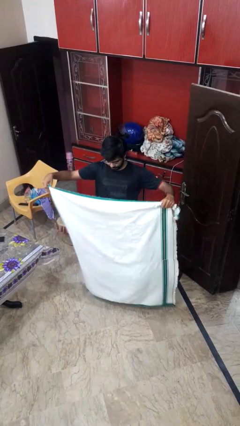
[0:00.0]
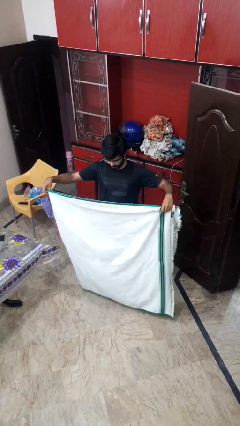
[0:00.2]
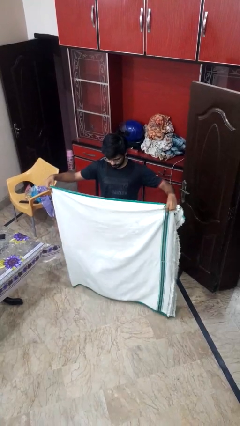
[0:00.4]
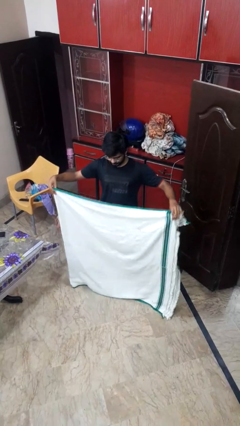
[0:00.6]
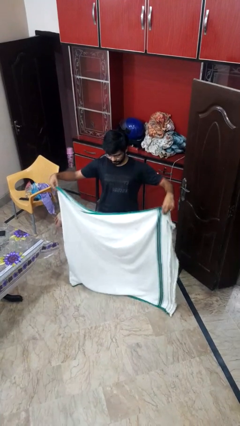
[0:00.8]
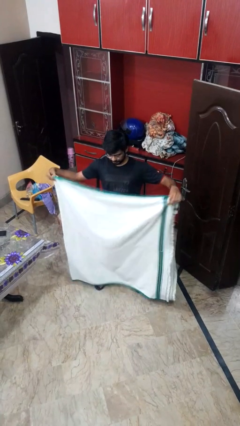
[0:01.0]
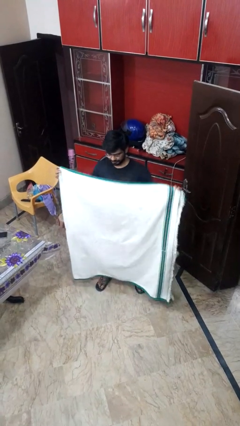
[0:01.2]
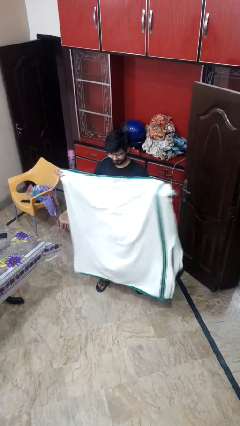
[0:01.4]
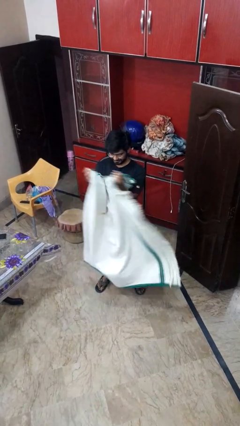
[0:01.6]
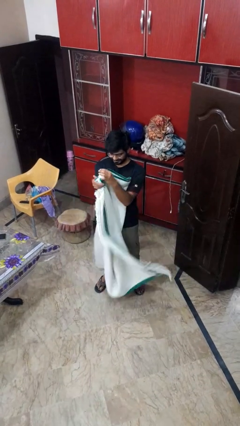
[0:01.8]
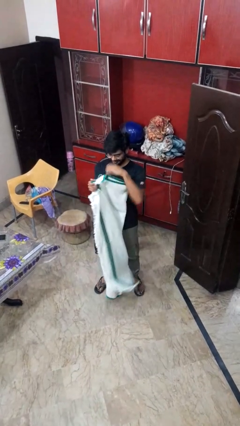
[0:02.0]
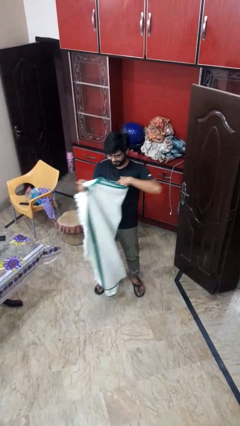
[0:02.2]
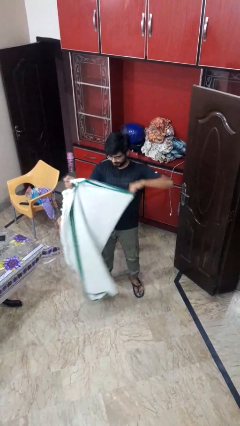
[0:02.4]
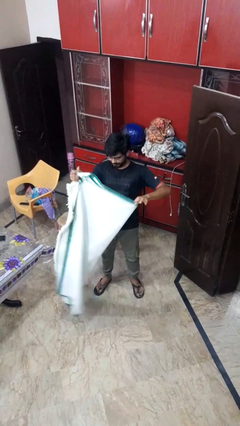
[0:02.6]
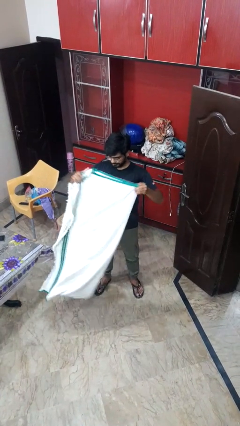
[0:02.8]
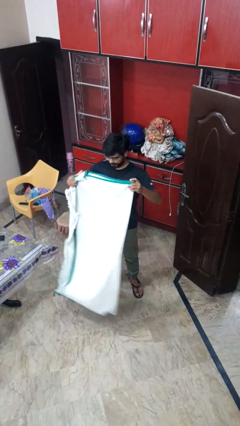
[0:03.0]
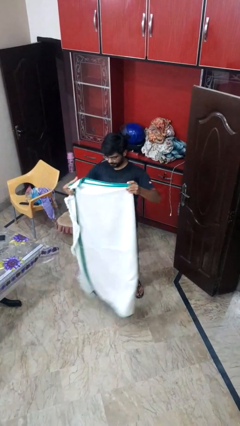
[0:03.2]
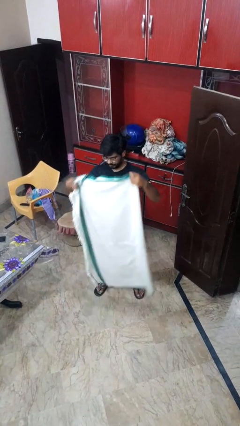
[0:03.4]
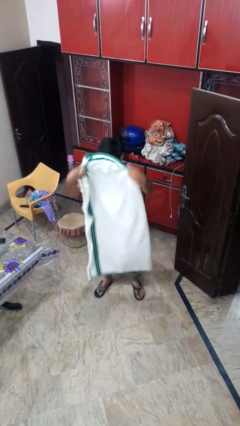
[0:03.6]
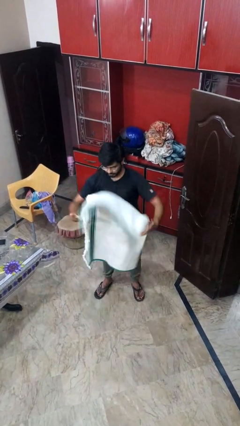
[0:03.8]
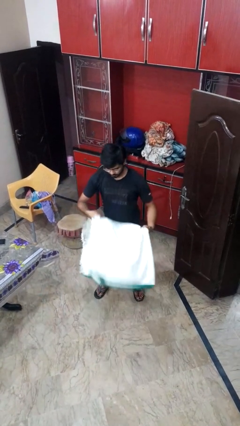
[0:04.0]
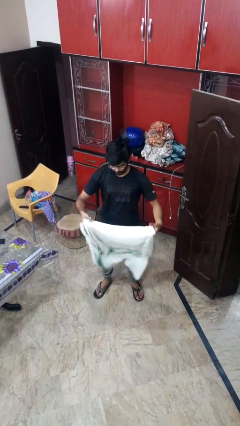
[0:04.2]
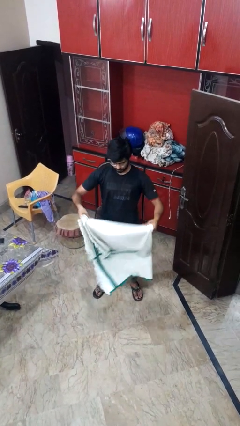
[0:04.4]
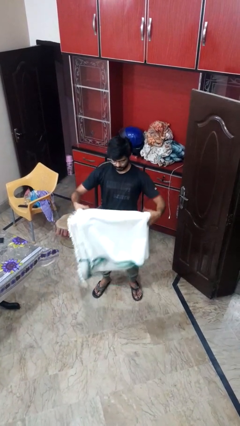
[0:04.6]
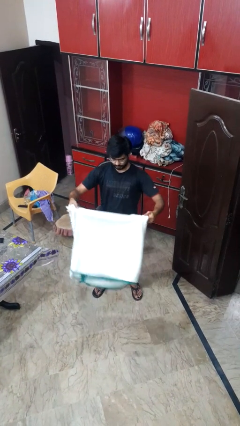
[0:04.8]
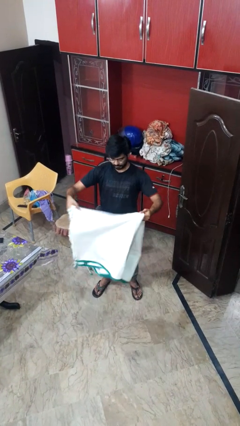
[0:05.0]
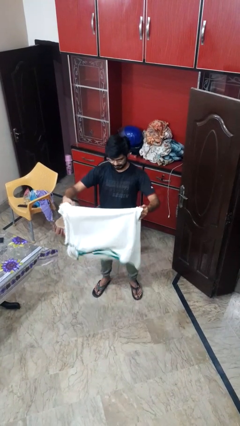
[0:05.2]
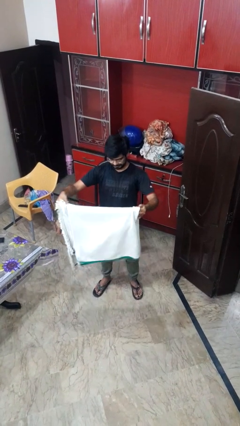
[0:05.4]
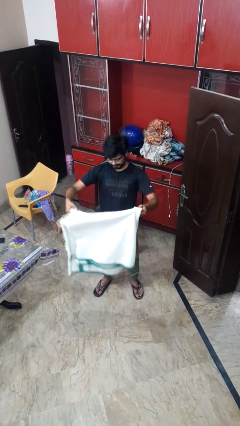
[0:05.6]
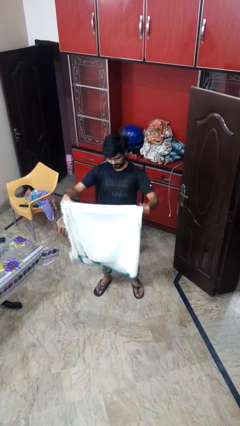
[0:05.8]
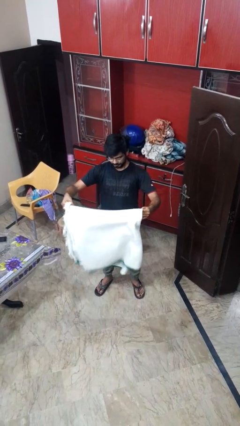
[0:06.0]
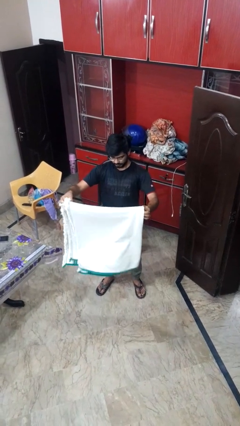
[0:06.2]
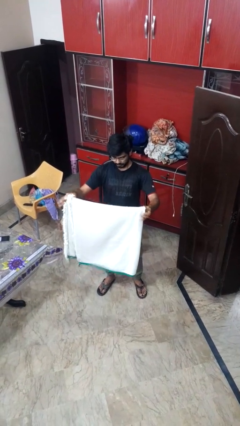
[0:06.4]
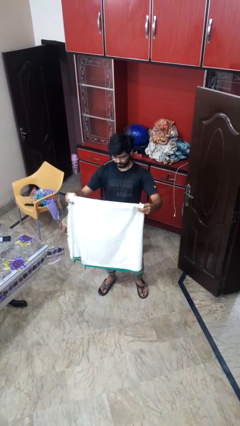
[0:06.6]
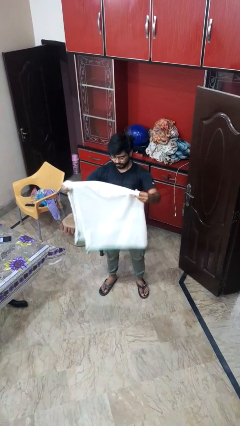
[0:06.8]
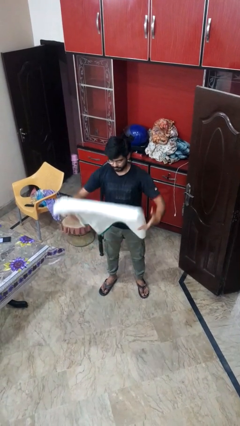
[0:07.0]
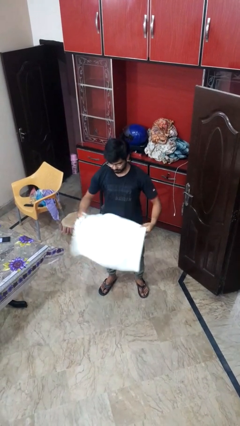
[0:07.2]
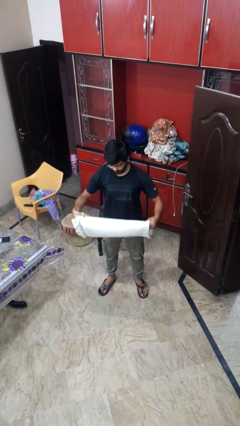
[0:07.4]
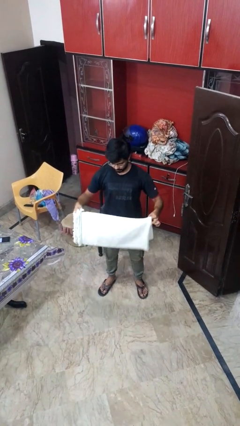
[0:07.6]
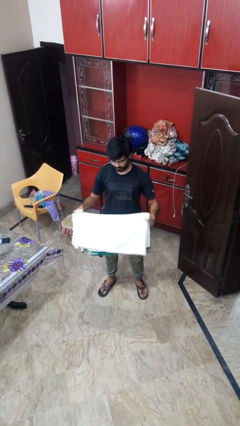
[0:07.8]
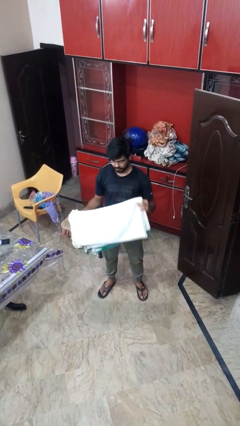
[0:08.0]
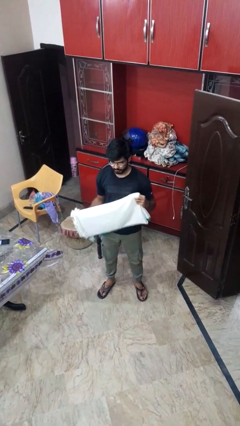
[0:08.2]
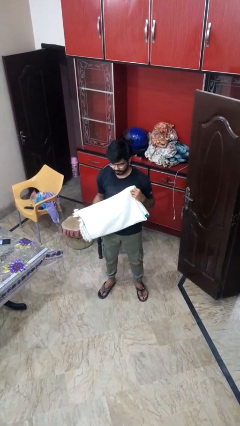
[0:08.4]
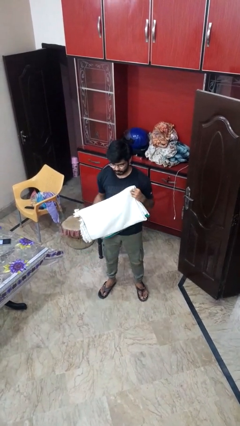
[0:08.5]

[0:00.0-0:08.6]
person folds blanket

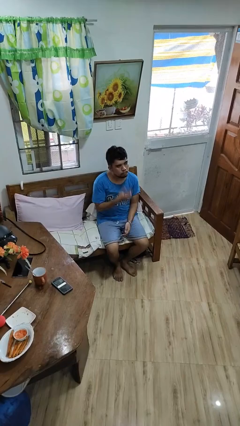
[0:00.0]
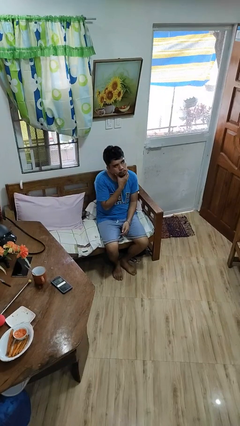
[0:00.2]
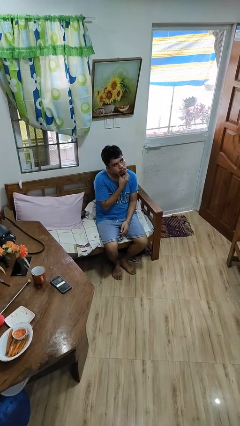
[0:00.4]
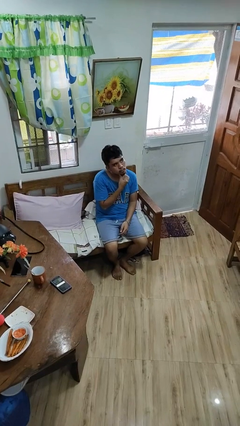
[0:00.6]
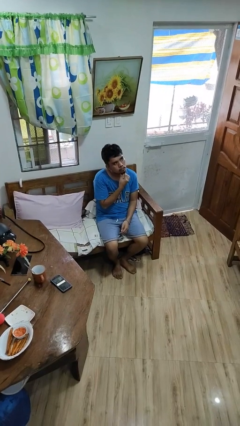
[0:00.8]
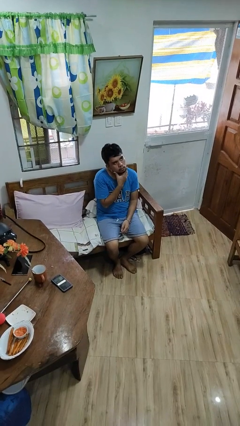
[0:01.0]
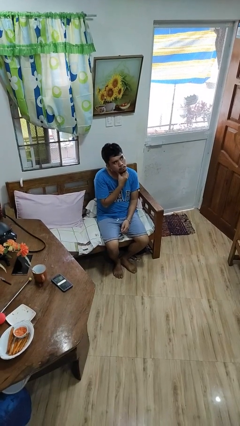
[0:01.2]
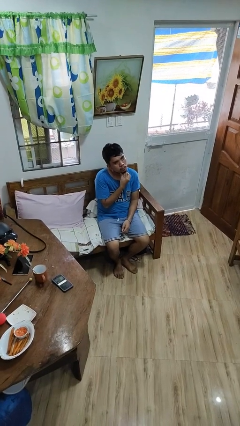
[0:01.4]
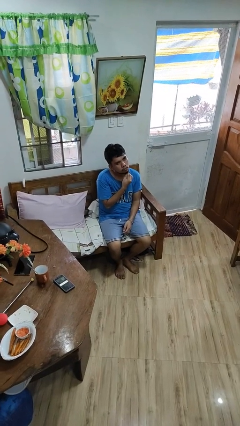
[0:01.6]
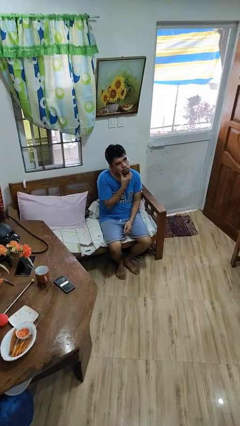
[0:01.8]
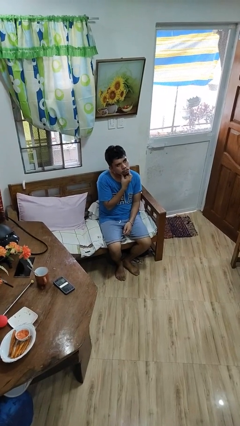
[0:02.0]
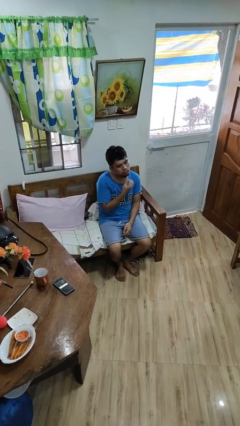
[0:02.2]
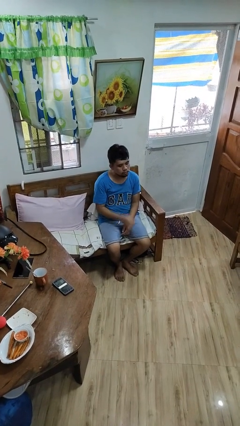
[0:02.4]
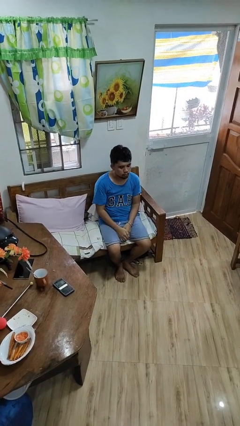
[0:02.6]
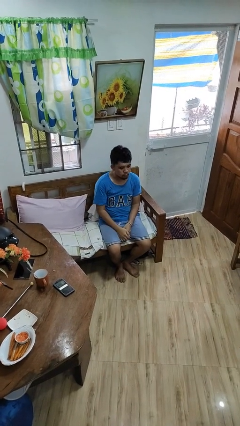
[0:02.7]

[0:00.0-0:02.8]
person strokes chin

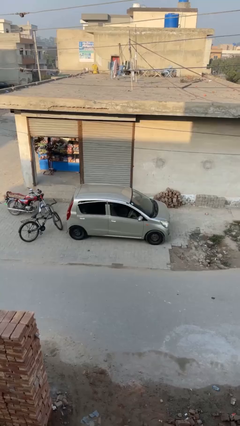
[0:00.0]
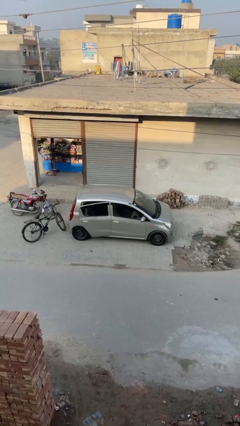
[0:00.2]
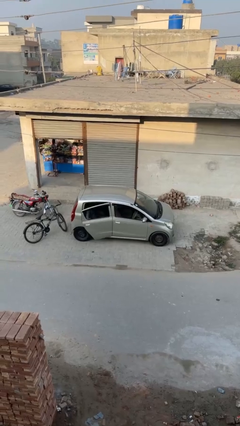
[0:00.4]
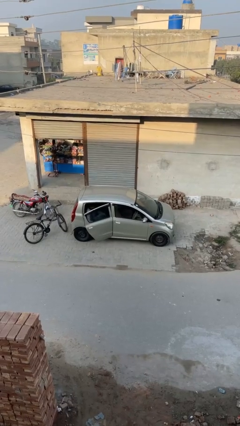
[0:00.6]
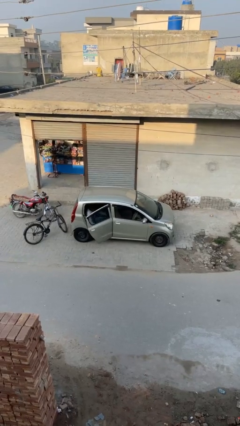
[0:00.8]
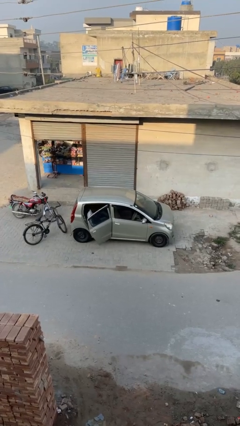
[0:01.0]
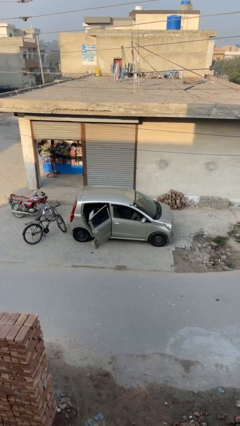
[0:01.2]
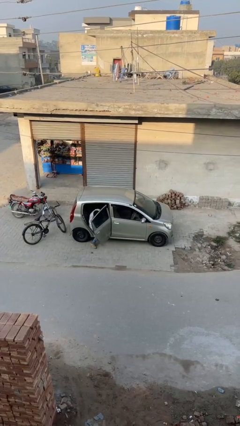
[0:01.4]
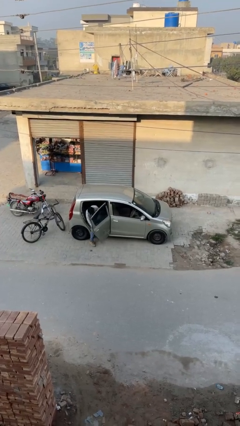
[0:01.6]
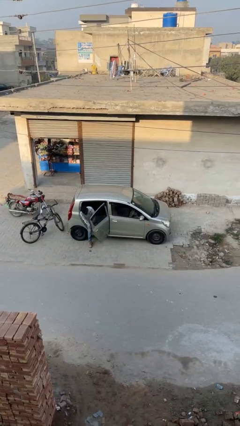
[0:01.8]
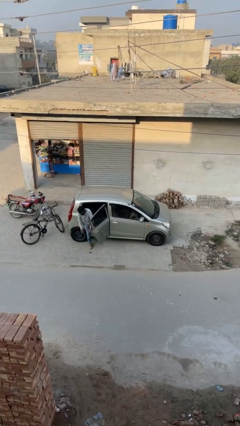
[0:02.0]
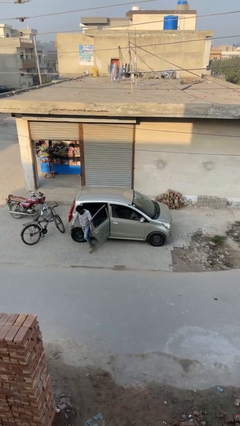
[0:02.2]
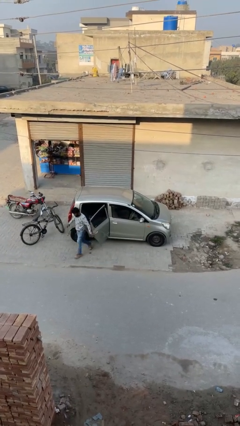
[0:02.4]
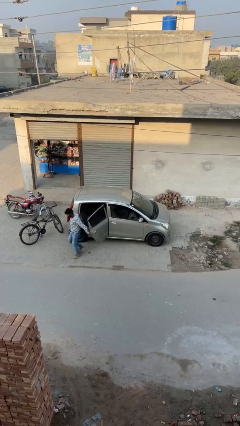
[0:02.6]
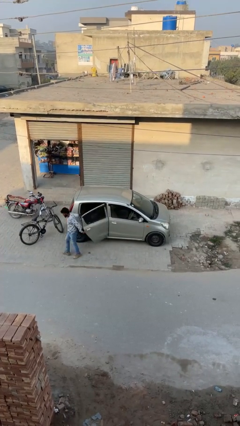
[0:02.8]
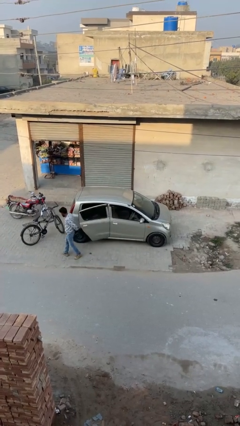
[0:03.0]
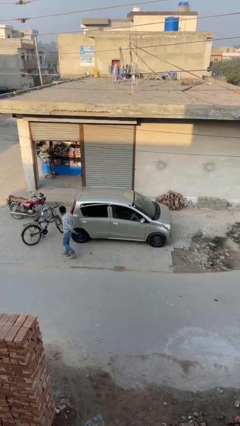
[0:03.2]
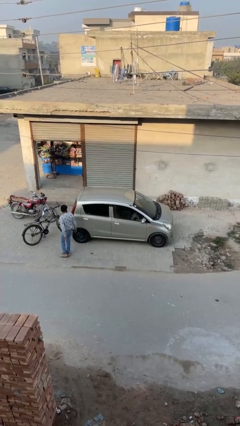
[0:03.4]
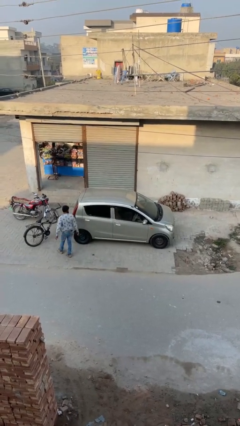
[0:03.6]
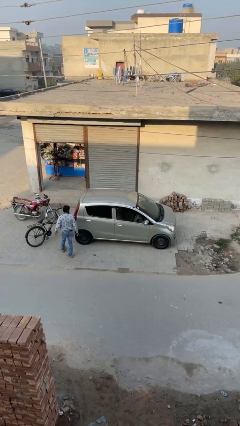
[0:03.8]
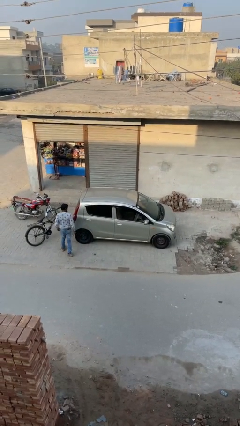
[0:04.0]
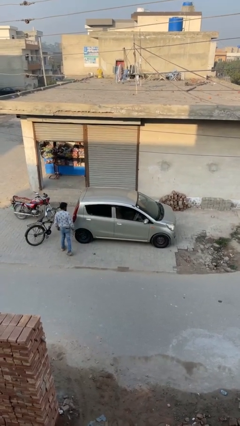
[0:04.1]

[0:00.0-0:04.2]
car drops off person

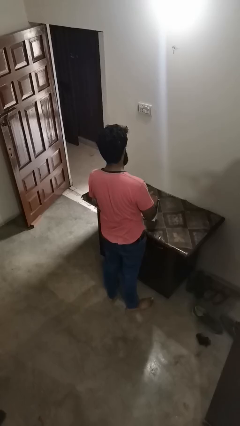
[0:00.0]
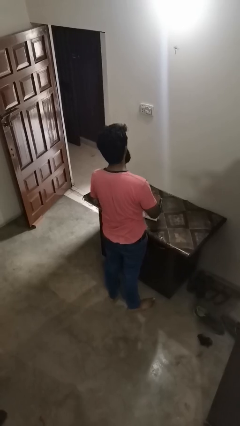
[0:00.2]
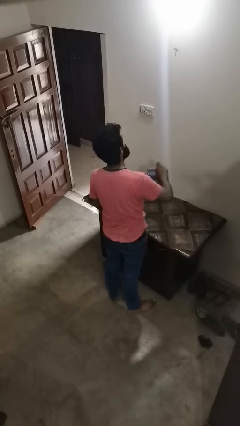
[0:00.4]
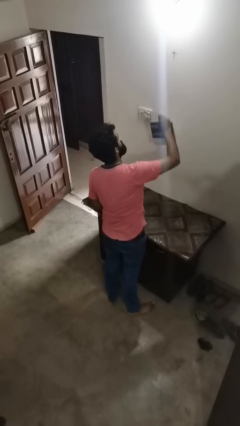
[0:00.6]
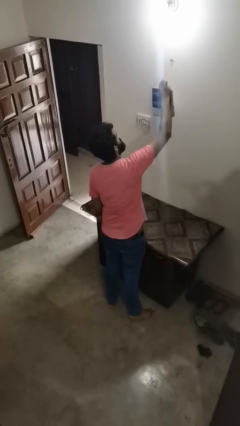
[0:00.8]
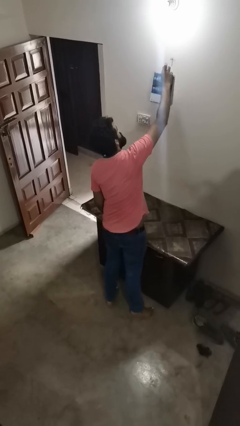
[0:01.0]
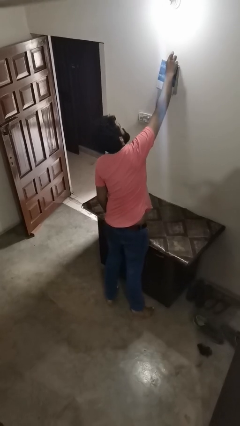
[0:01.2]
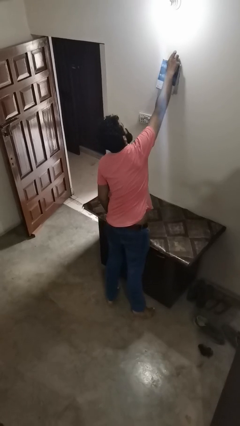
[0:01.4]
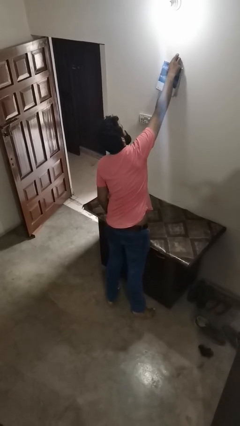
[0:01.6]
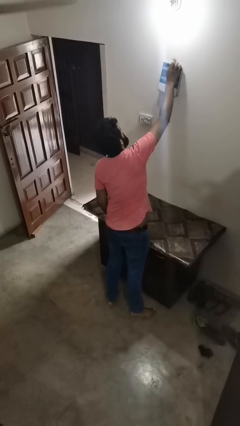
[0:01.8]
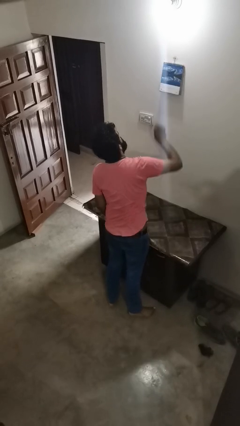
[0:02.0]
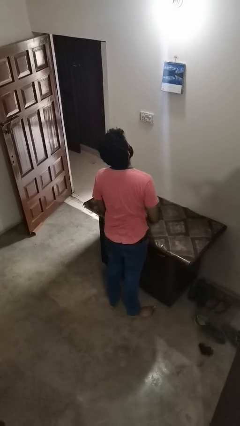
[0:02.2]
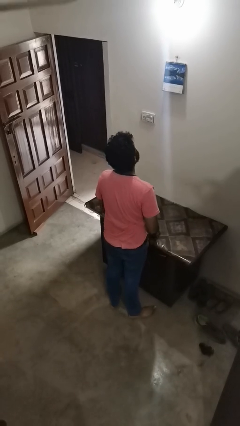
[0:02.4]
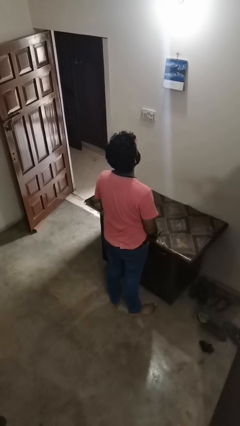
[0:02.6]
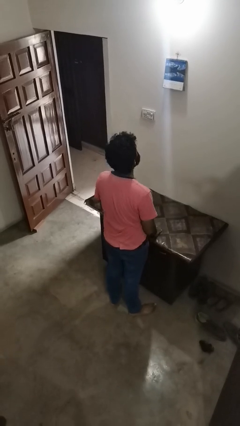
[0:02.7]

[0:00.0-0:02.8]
person puts up picture frame
